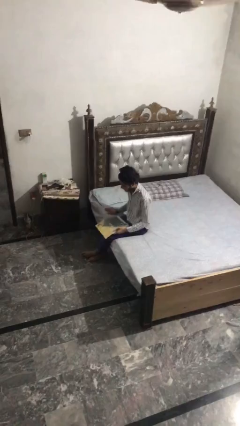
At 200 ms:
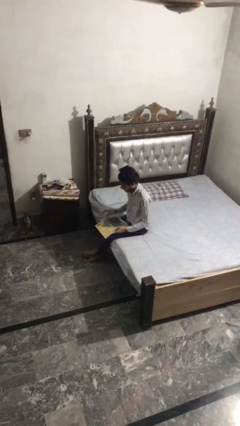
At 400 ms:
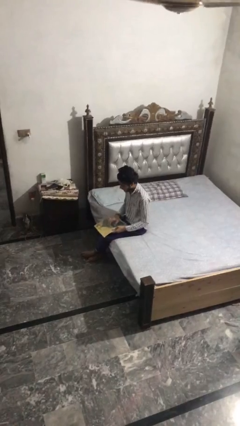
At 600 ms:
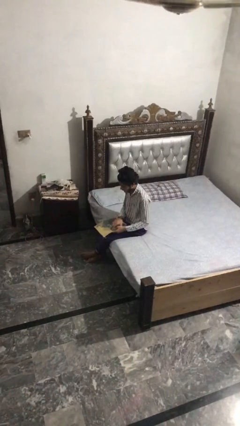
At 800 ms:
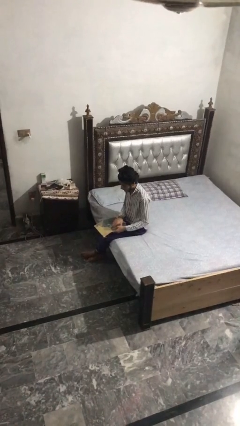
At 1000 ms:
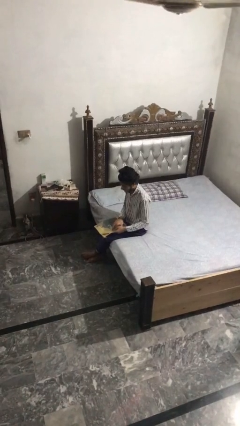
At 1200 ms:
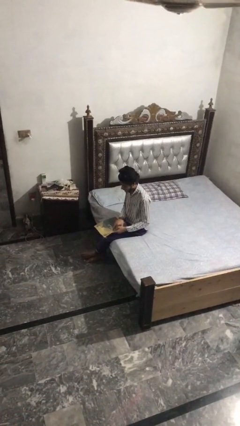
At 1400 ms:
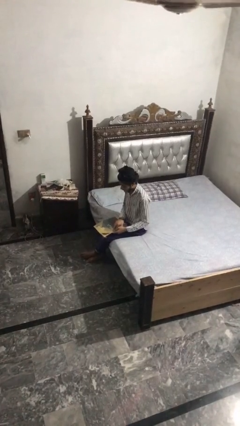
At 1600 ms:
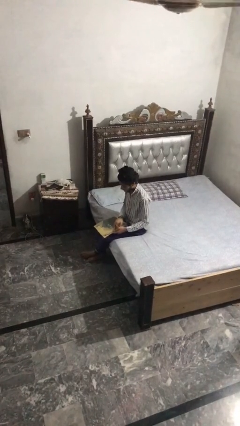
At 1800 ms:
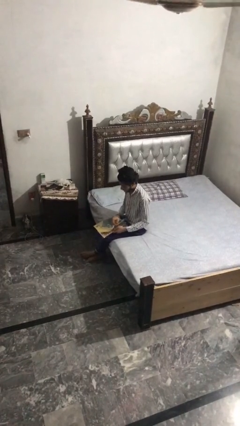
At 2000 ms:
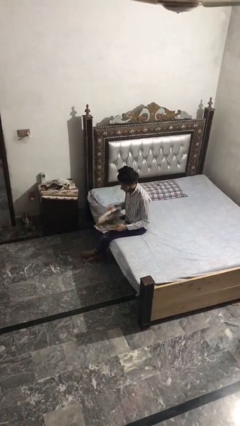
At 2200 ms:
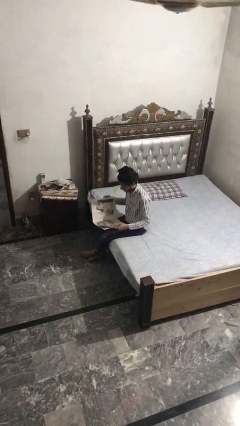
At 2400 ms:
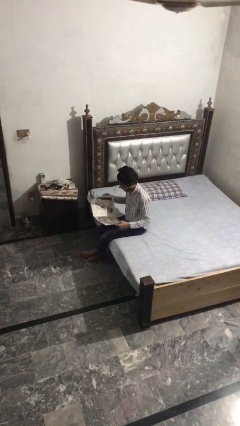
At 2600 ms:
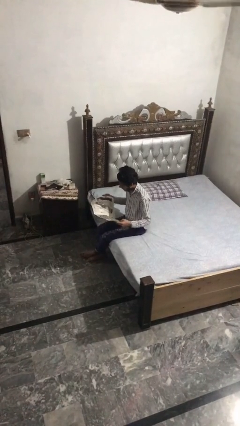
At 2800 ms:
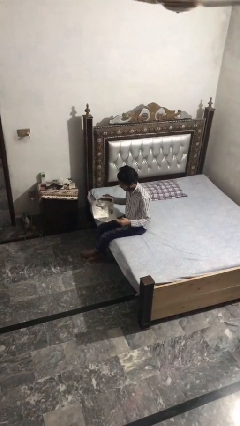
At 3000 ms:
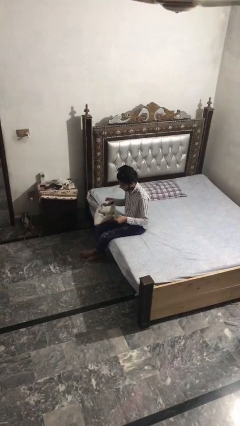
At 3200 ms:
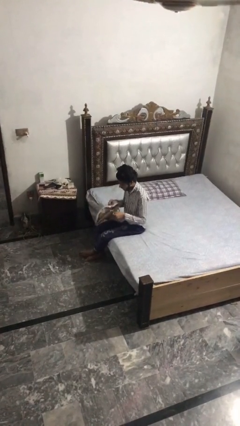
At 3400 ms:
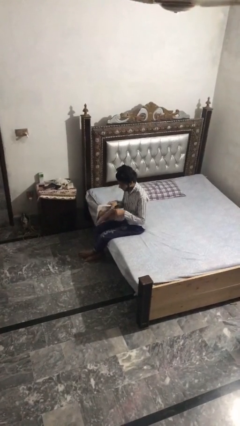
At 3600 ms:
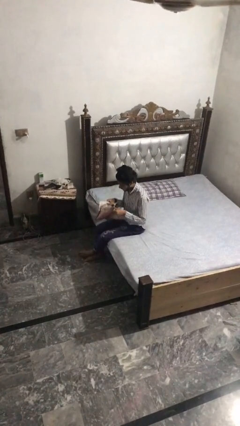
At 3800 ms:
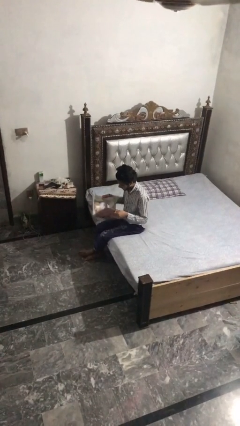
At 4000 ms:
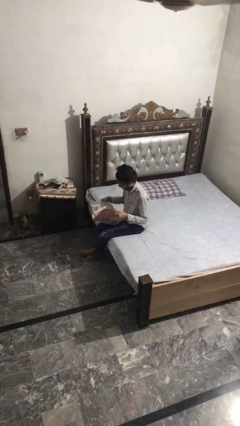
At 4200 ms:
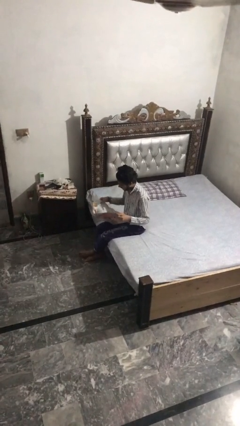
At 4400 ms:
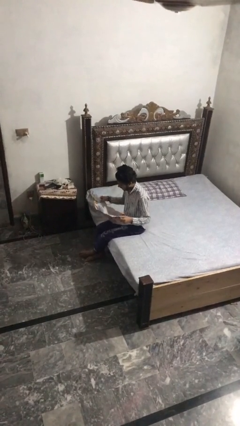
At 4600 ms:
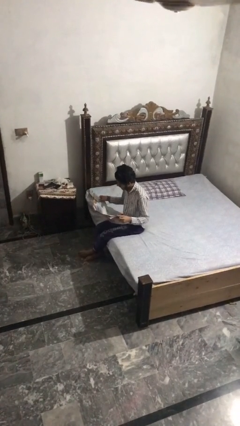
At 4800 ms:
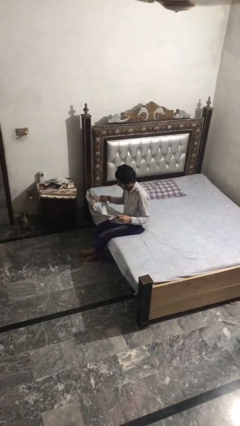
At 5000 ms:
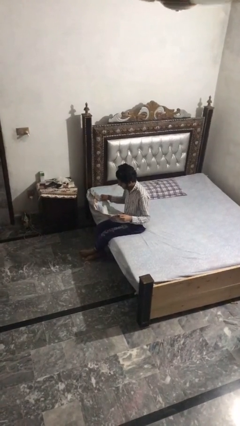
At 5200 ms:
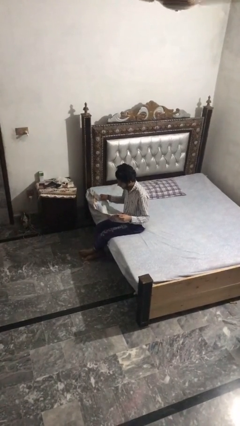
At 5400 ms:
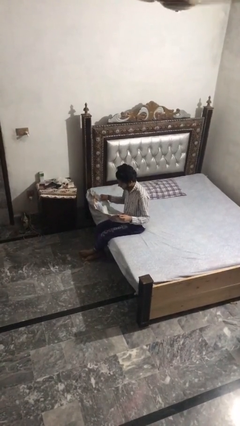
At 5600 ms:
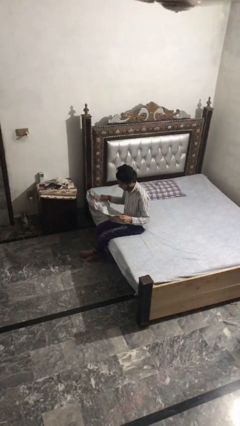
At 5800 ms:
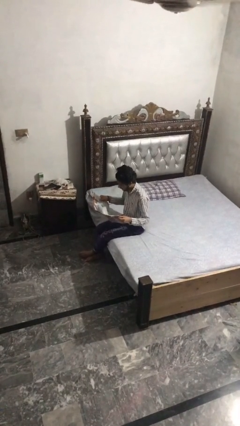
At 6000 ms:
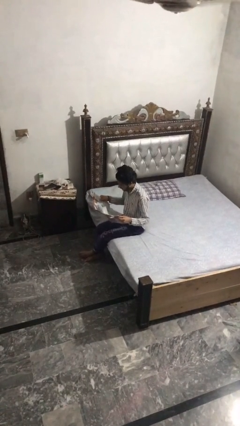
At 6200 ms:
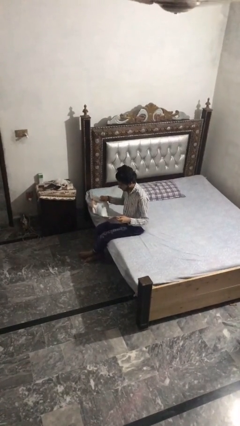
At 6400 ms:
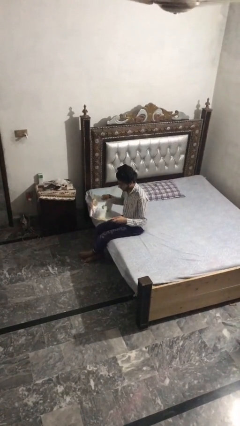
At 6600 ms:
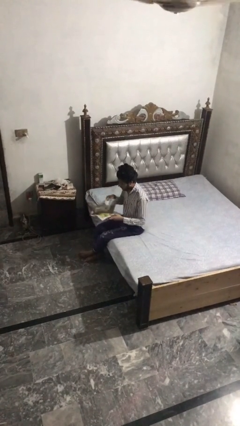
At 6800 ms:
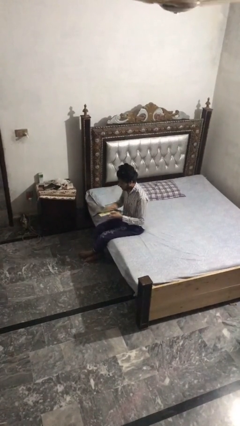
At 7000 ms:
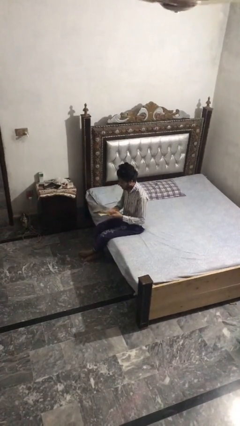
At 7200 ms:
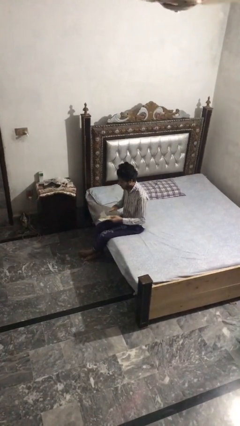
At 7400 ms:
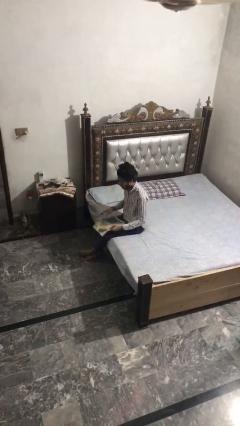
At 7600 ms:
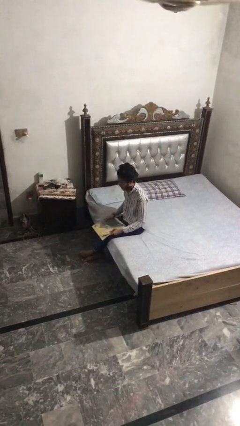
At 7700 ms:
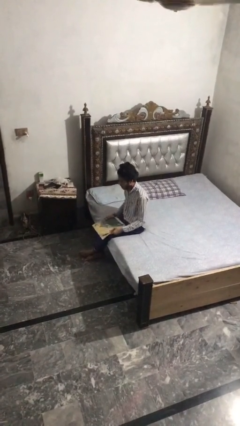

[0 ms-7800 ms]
person reads magazine

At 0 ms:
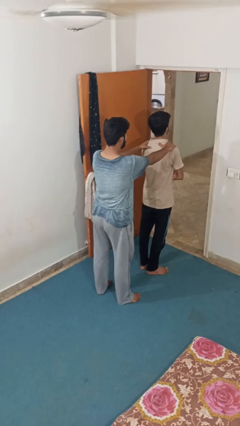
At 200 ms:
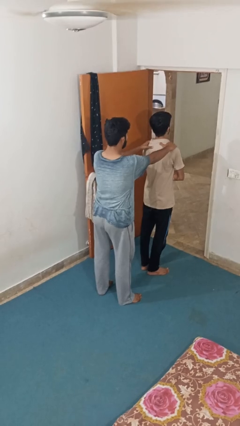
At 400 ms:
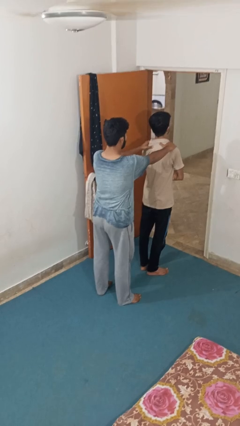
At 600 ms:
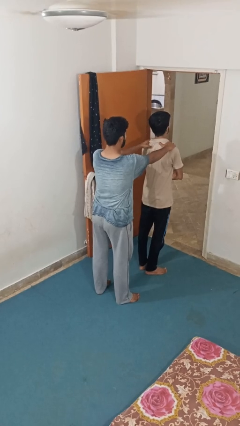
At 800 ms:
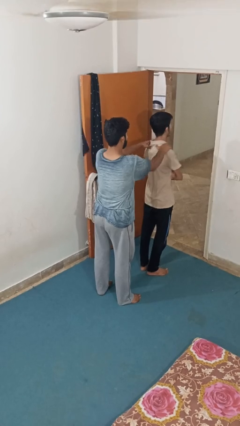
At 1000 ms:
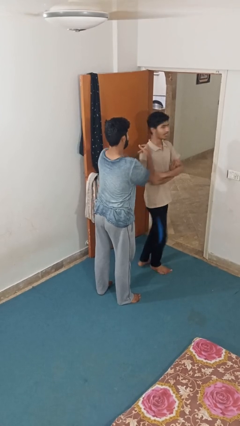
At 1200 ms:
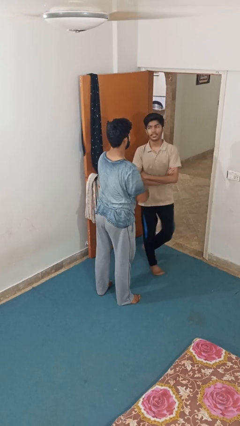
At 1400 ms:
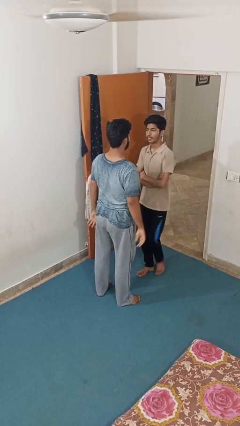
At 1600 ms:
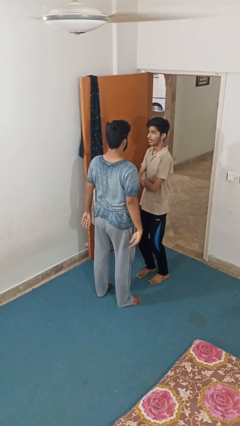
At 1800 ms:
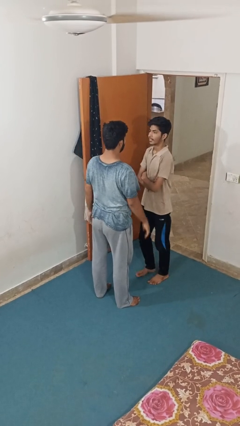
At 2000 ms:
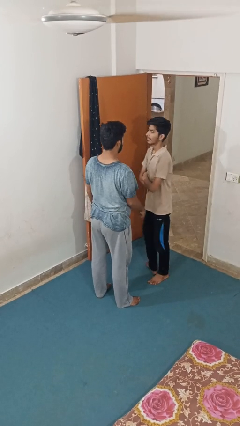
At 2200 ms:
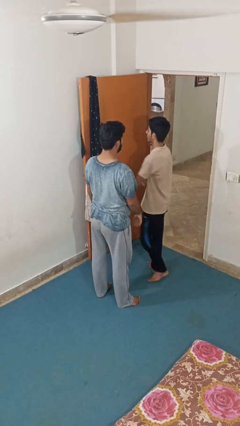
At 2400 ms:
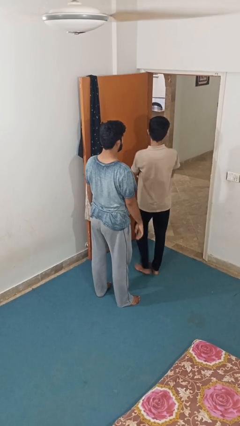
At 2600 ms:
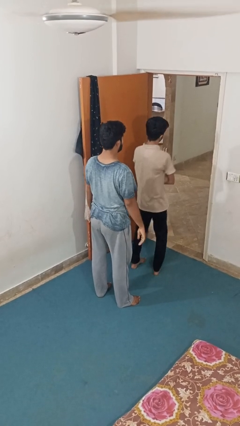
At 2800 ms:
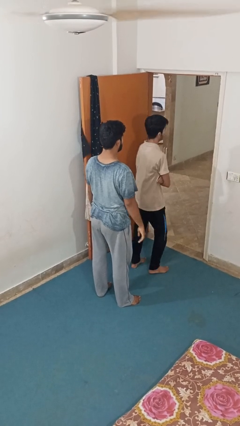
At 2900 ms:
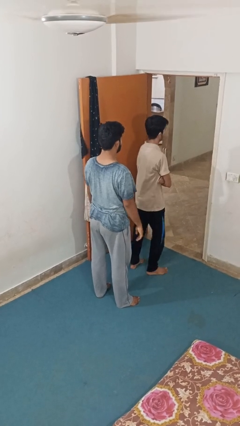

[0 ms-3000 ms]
person spins person around

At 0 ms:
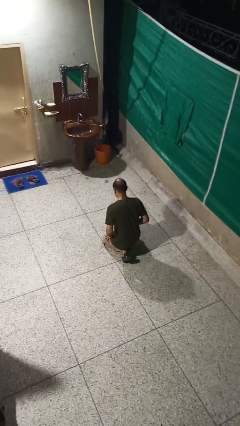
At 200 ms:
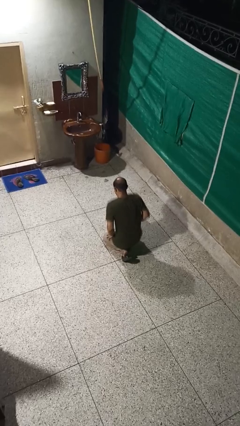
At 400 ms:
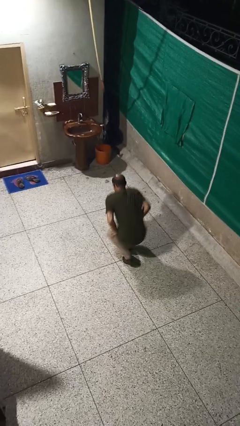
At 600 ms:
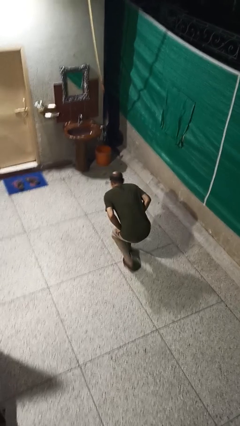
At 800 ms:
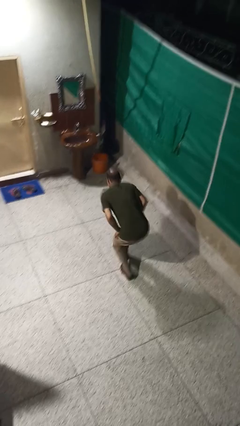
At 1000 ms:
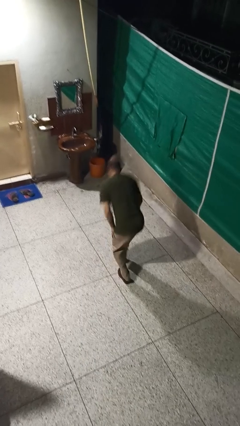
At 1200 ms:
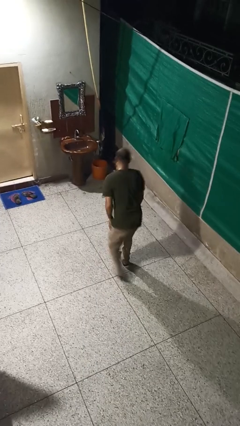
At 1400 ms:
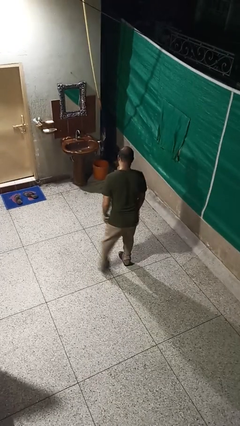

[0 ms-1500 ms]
person stands up from floor

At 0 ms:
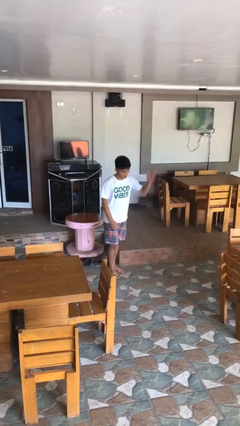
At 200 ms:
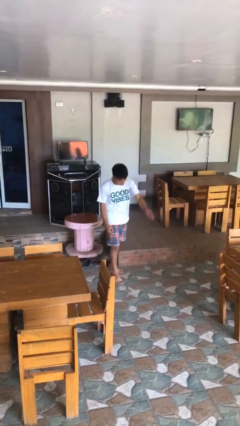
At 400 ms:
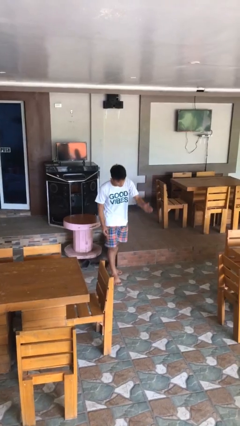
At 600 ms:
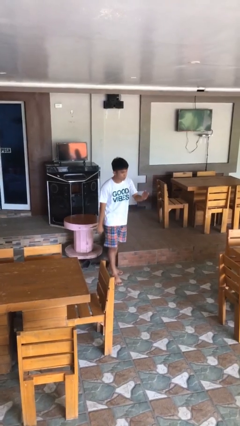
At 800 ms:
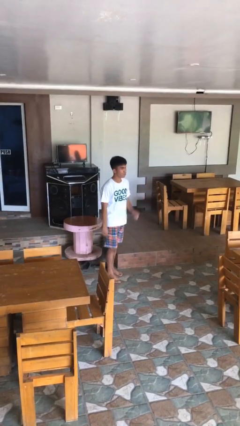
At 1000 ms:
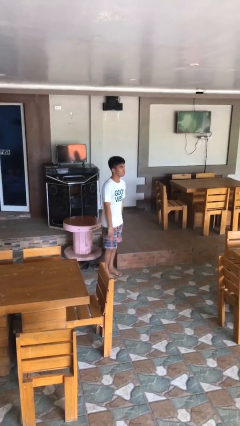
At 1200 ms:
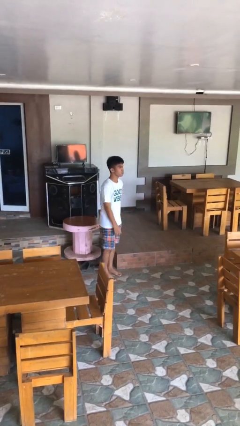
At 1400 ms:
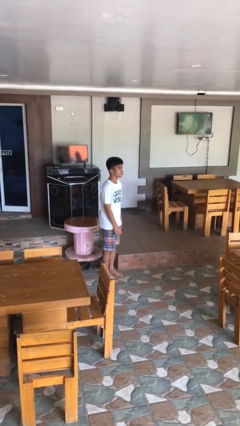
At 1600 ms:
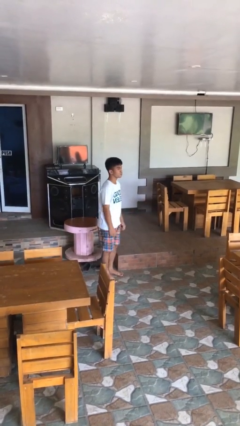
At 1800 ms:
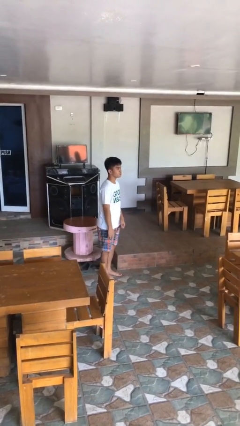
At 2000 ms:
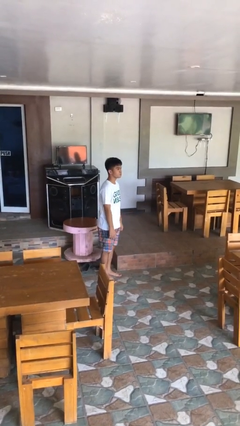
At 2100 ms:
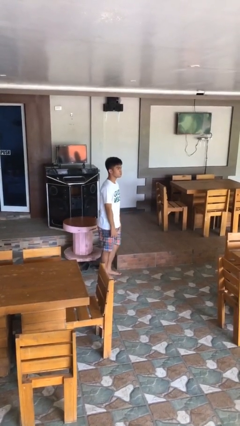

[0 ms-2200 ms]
person karate chop

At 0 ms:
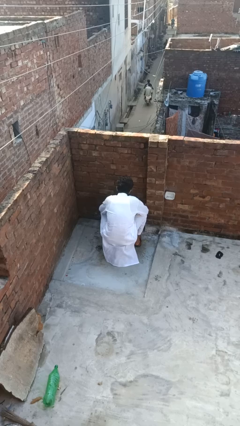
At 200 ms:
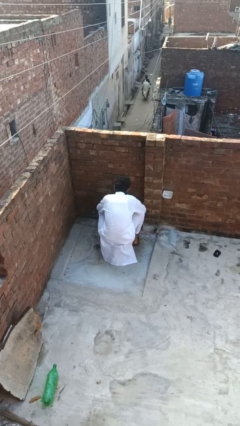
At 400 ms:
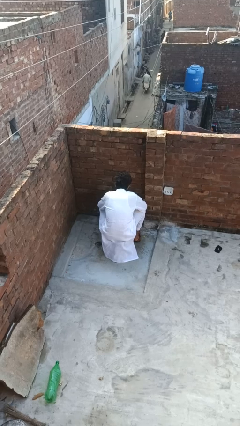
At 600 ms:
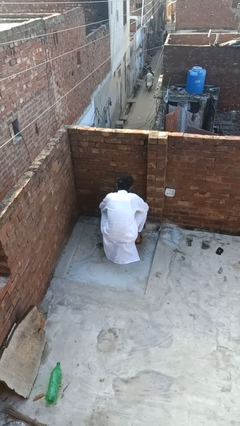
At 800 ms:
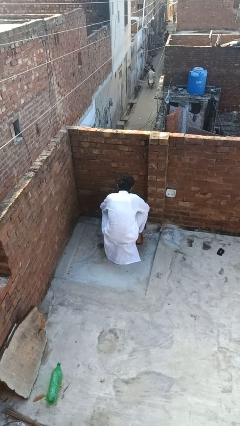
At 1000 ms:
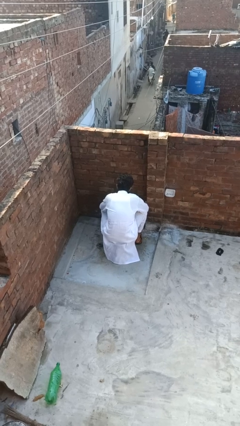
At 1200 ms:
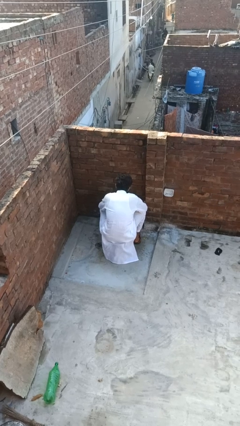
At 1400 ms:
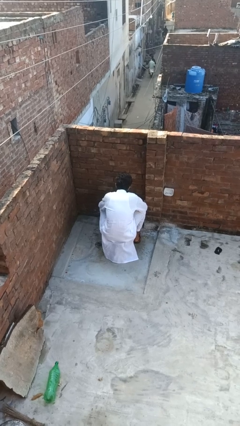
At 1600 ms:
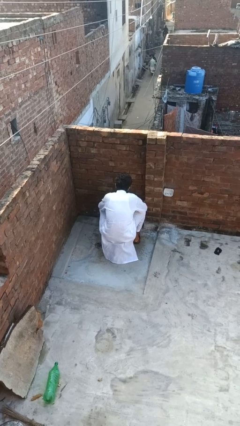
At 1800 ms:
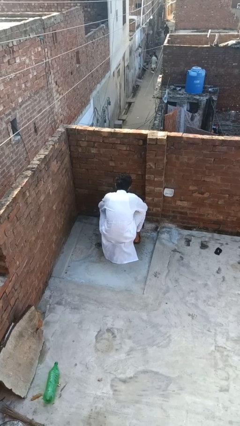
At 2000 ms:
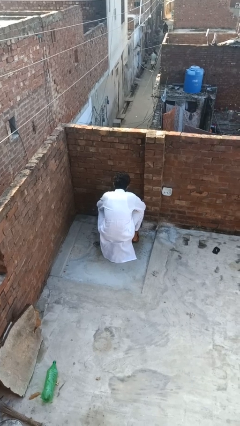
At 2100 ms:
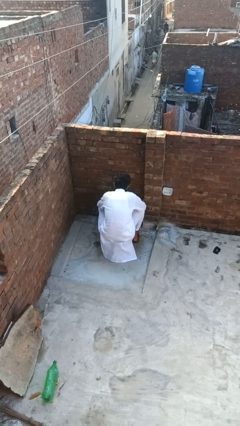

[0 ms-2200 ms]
person turns on faucet

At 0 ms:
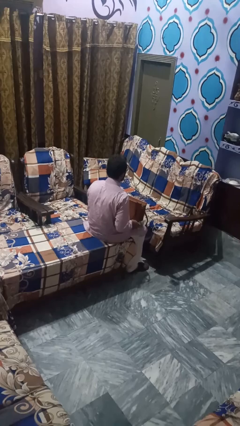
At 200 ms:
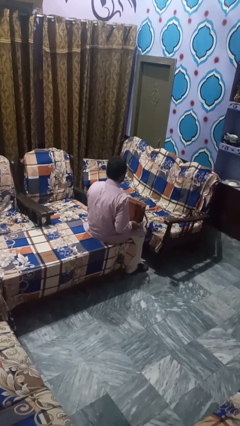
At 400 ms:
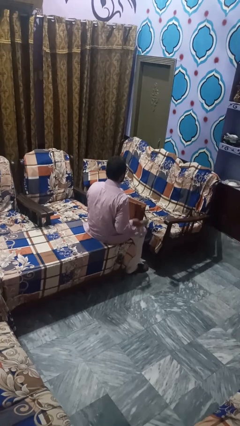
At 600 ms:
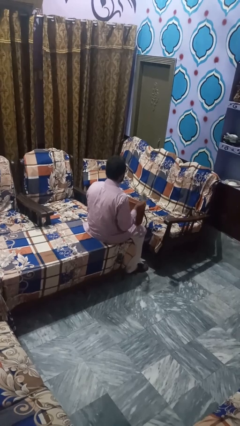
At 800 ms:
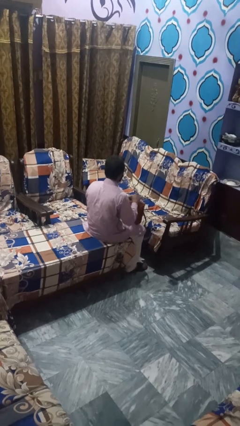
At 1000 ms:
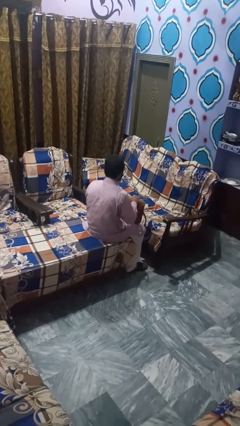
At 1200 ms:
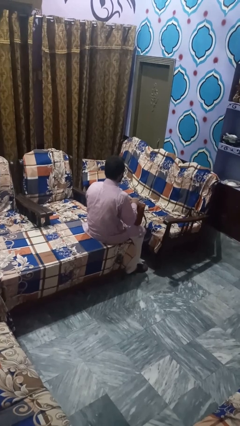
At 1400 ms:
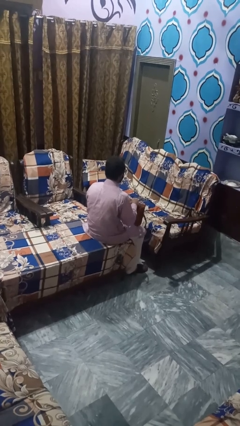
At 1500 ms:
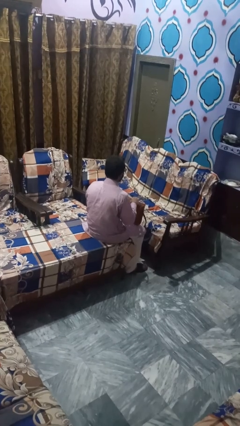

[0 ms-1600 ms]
person takes object from bag
